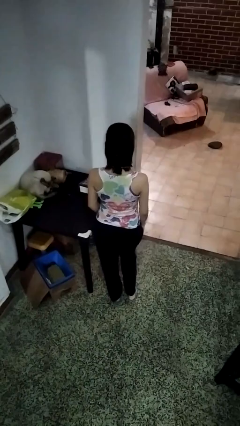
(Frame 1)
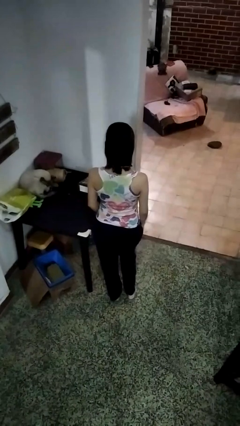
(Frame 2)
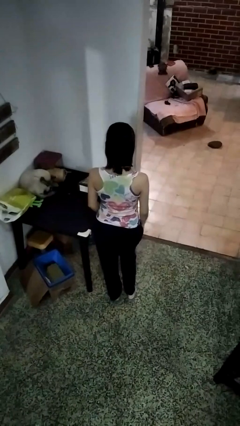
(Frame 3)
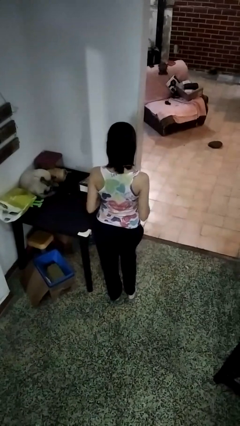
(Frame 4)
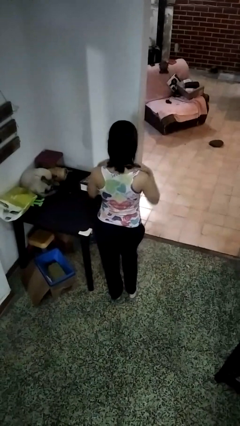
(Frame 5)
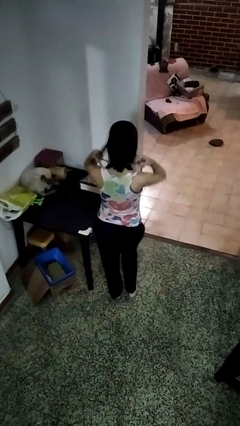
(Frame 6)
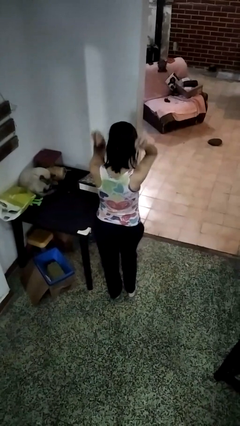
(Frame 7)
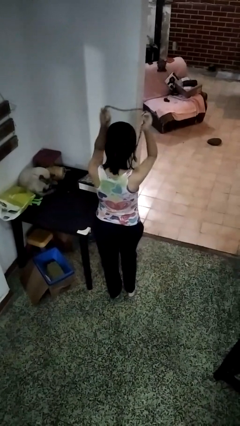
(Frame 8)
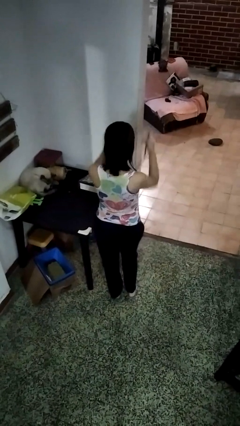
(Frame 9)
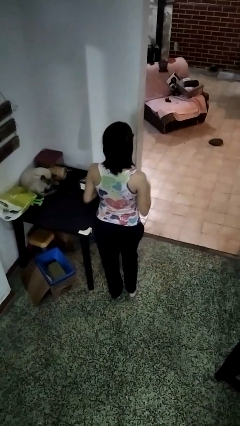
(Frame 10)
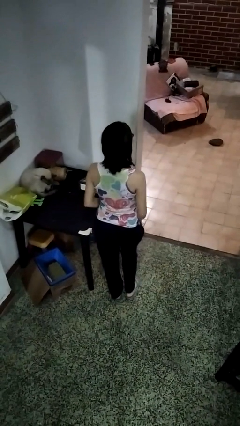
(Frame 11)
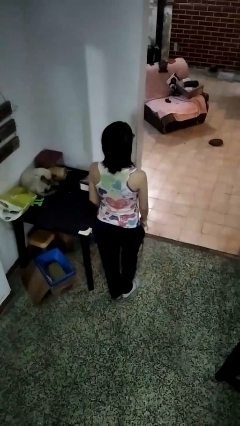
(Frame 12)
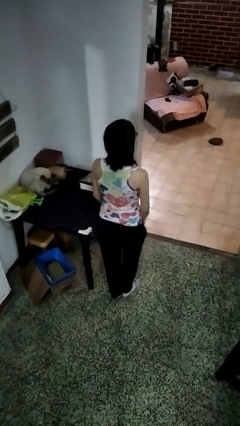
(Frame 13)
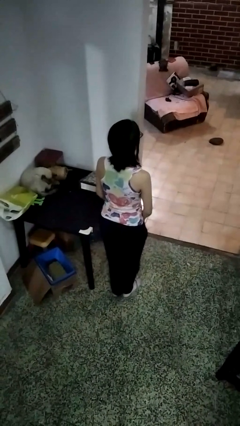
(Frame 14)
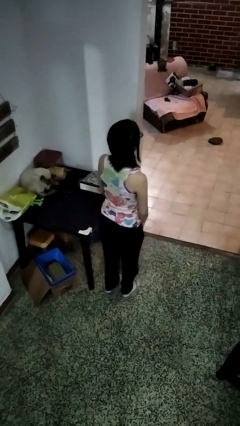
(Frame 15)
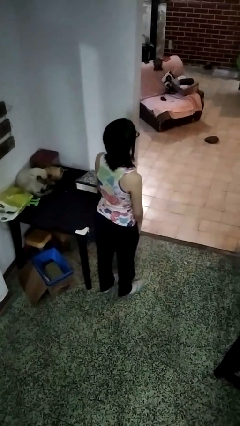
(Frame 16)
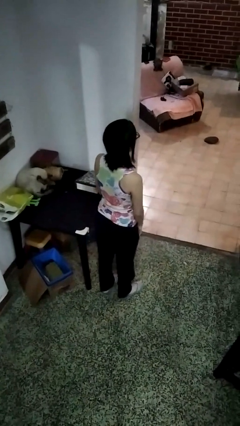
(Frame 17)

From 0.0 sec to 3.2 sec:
person takes off necklace

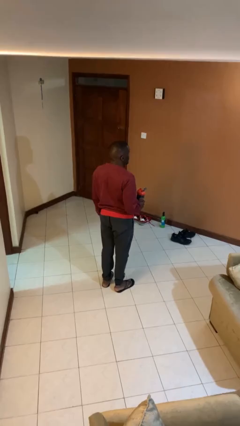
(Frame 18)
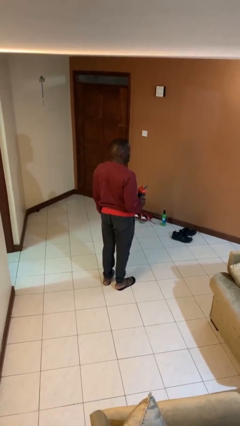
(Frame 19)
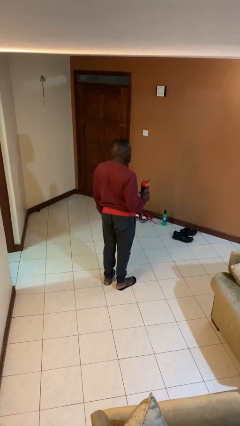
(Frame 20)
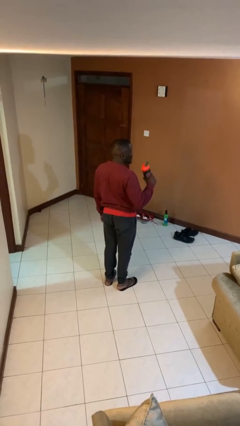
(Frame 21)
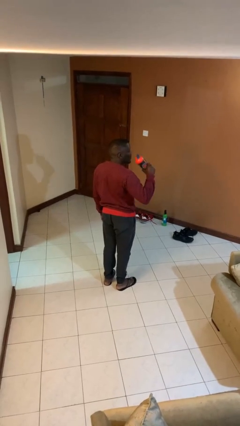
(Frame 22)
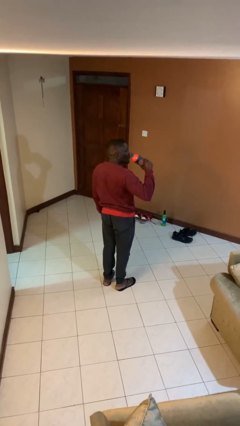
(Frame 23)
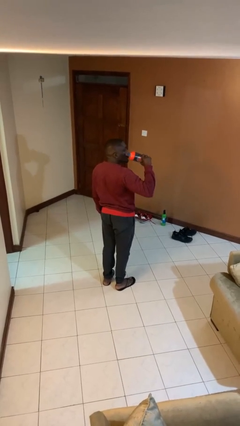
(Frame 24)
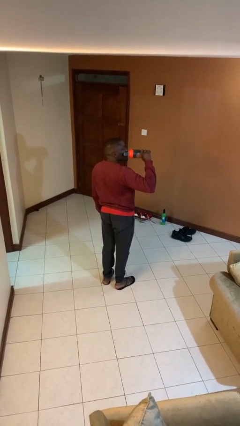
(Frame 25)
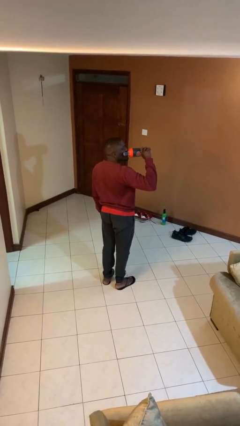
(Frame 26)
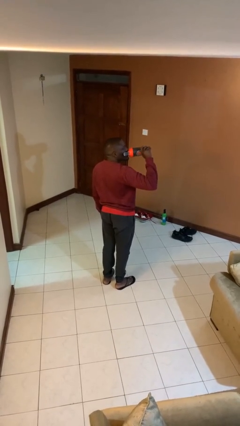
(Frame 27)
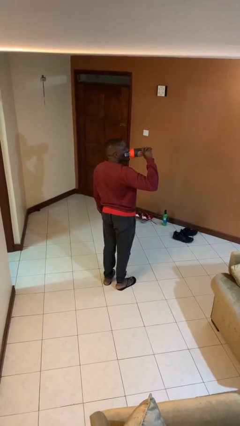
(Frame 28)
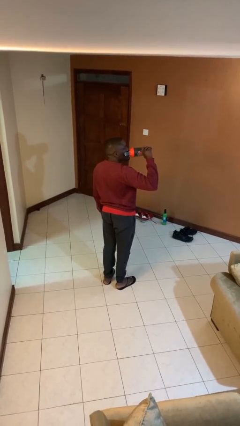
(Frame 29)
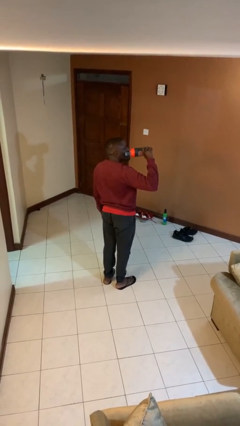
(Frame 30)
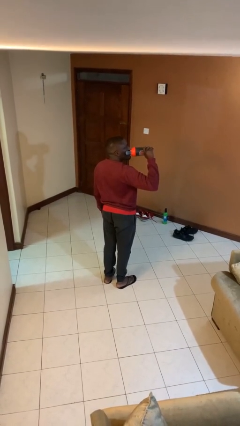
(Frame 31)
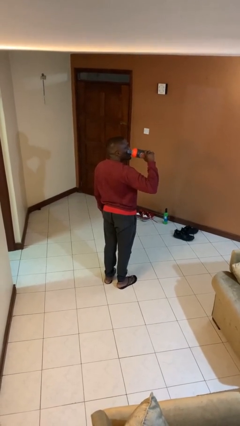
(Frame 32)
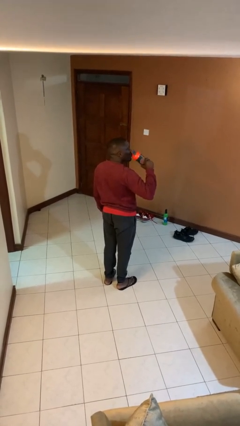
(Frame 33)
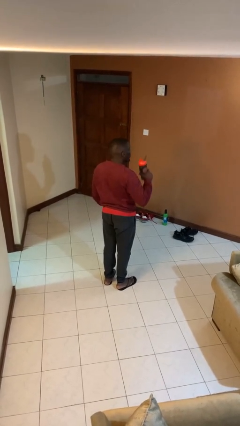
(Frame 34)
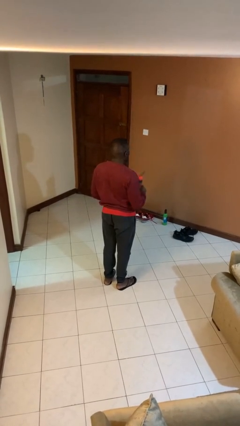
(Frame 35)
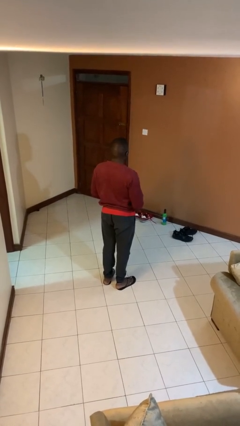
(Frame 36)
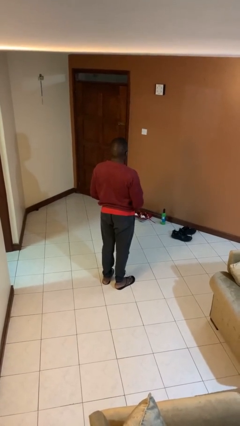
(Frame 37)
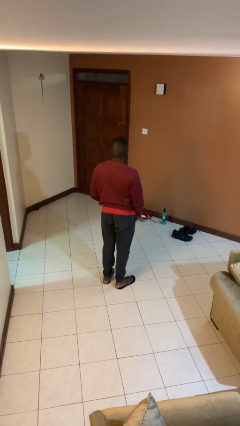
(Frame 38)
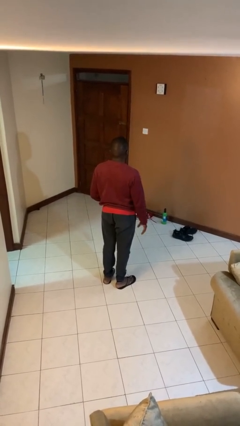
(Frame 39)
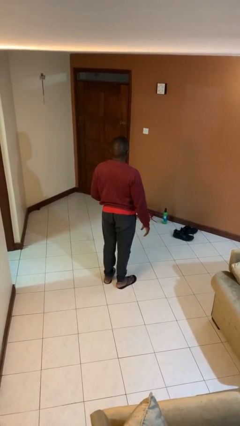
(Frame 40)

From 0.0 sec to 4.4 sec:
person drinks from bottle

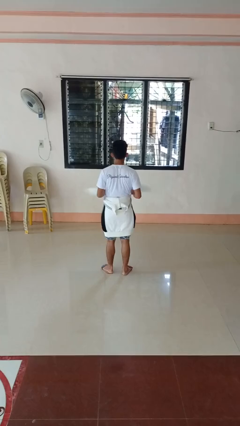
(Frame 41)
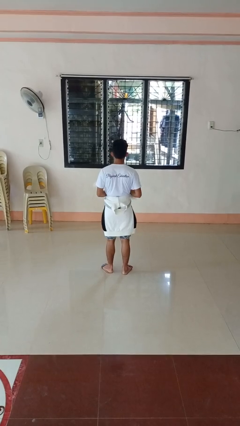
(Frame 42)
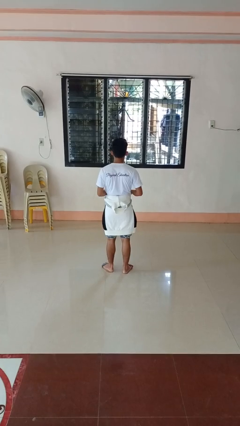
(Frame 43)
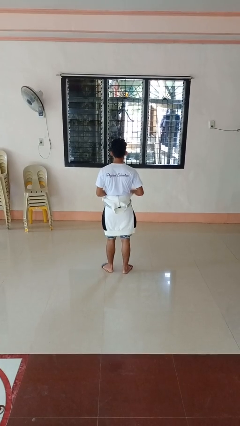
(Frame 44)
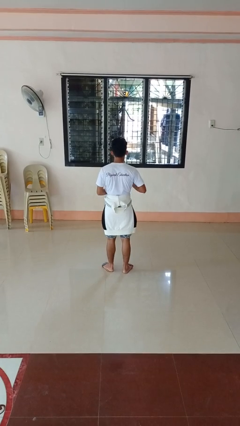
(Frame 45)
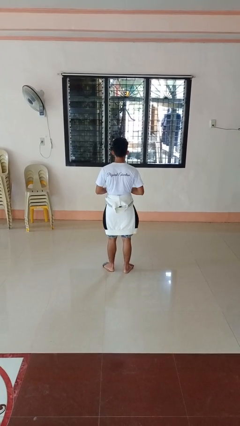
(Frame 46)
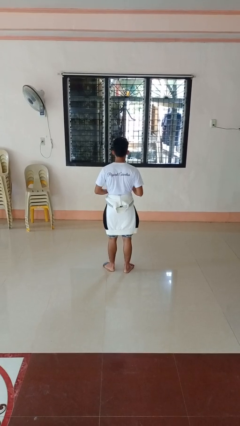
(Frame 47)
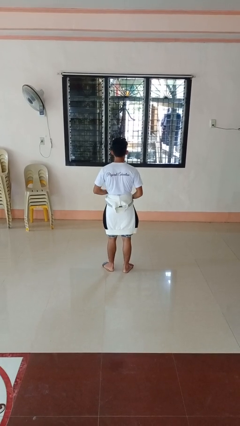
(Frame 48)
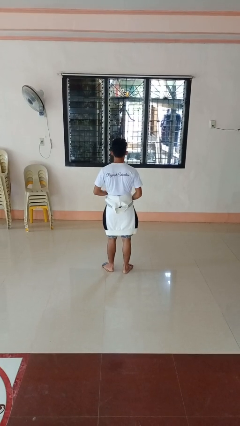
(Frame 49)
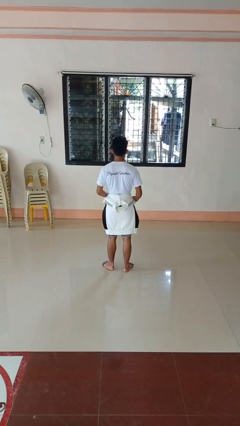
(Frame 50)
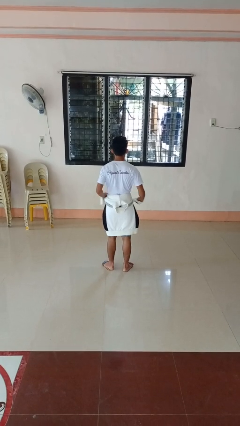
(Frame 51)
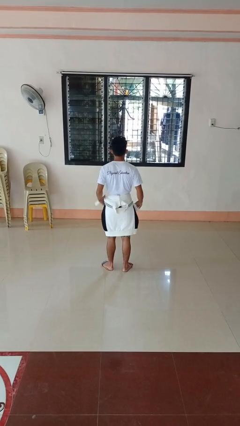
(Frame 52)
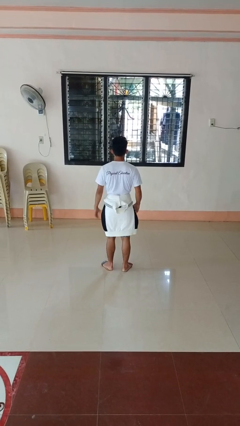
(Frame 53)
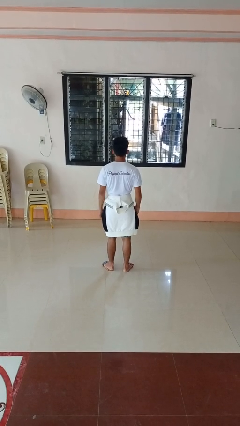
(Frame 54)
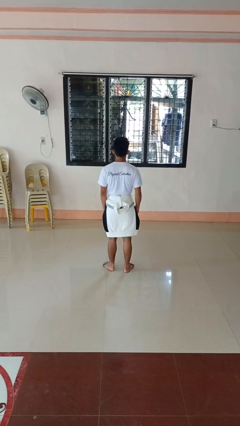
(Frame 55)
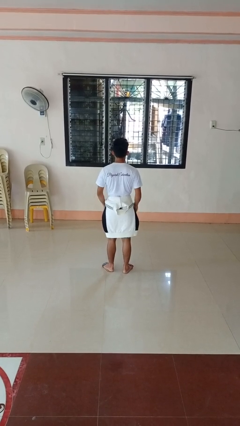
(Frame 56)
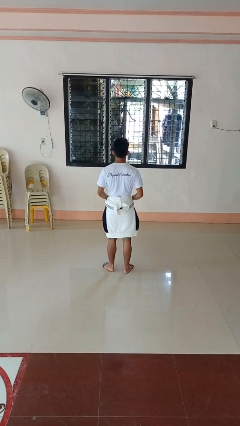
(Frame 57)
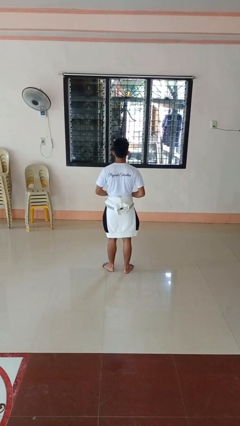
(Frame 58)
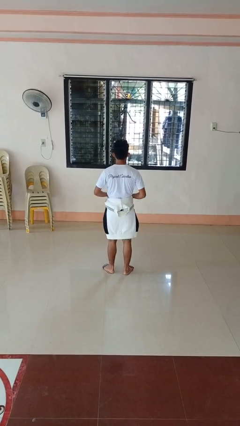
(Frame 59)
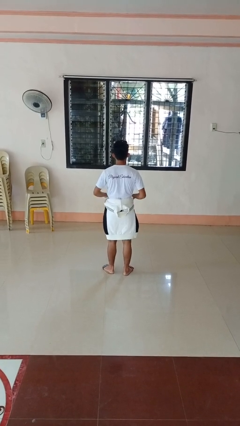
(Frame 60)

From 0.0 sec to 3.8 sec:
person ties jacket around waist

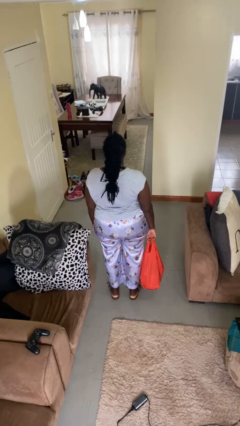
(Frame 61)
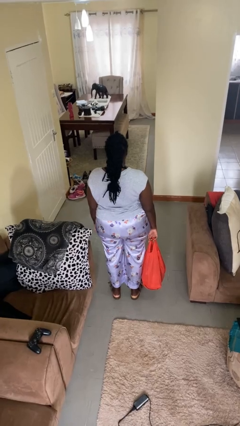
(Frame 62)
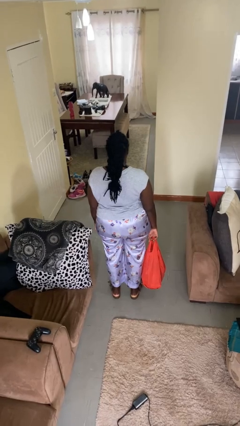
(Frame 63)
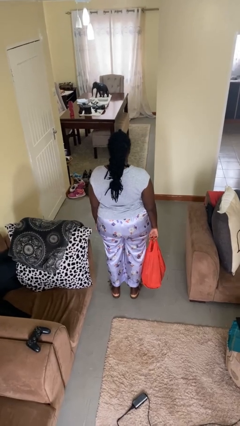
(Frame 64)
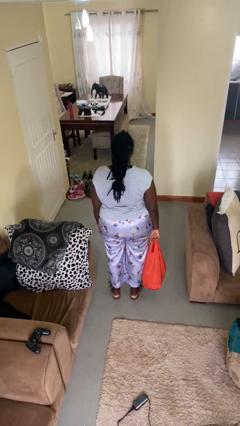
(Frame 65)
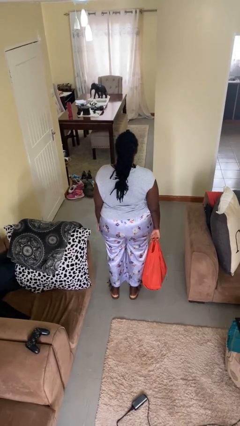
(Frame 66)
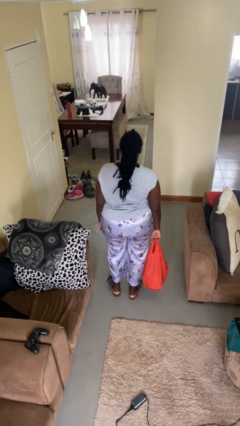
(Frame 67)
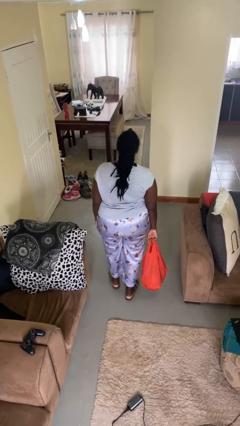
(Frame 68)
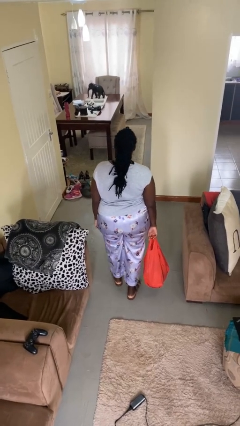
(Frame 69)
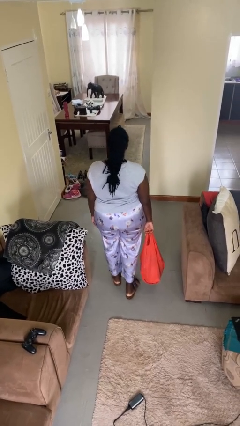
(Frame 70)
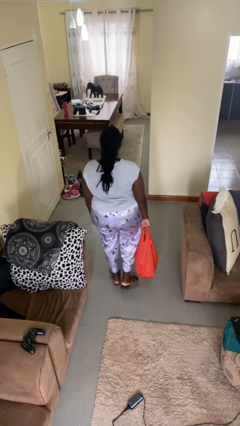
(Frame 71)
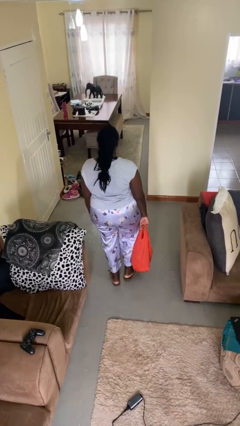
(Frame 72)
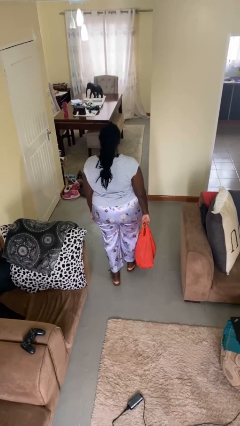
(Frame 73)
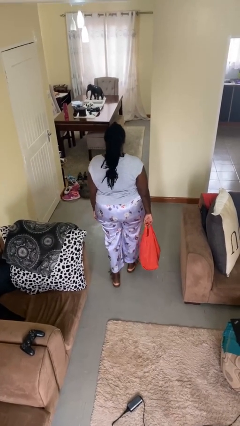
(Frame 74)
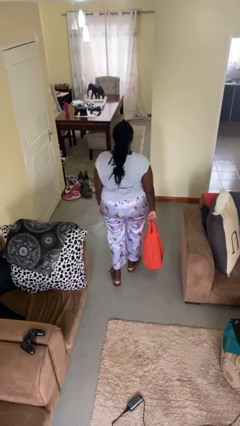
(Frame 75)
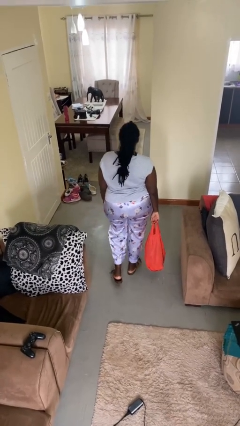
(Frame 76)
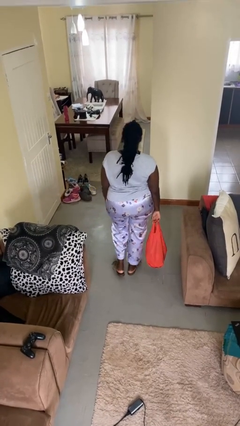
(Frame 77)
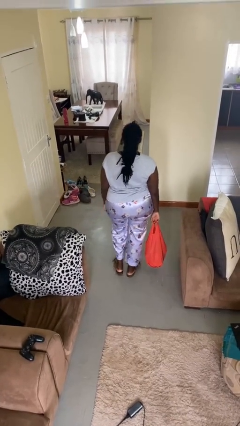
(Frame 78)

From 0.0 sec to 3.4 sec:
person carries groceries

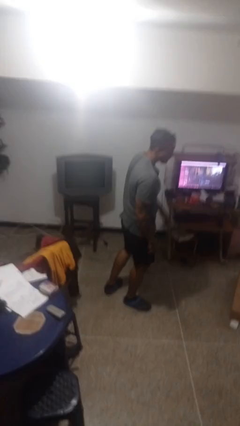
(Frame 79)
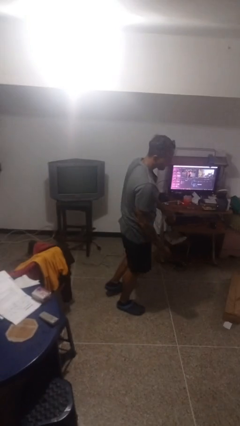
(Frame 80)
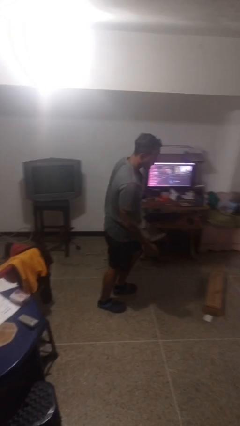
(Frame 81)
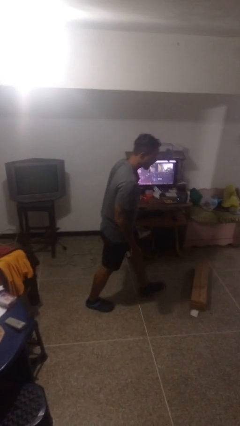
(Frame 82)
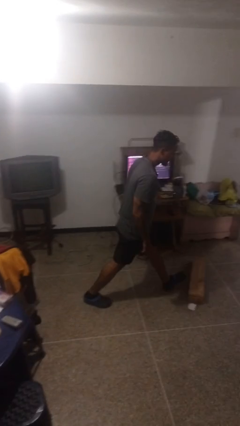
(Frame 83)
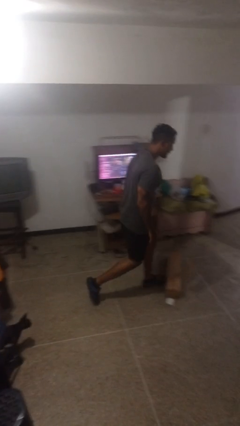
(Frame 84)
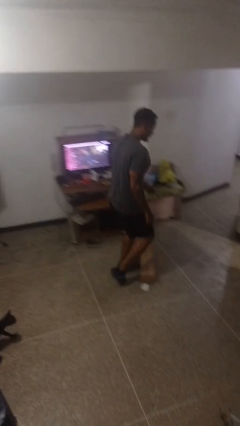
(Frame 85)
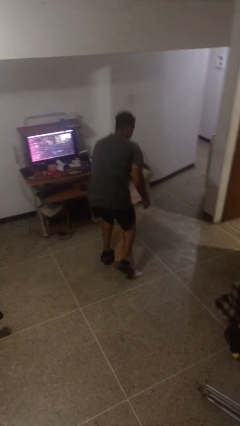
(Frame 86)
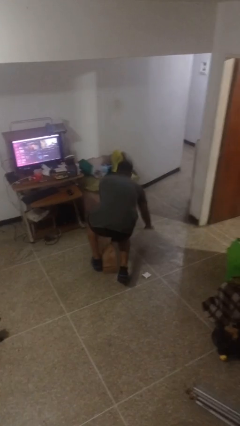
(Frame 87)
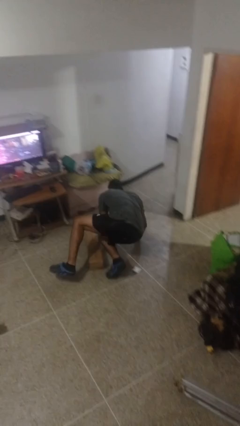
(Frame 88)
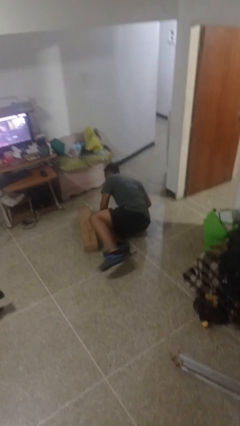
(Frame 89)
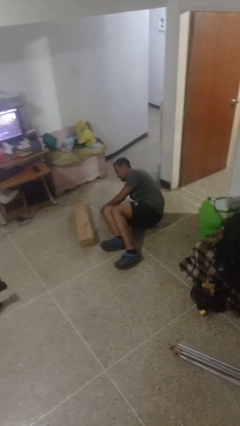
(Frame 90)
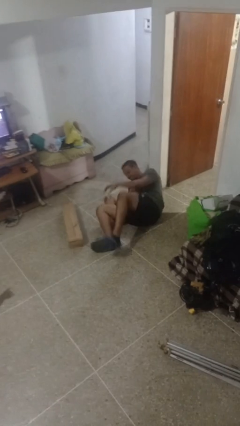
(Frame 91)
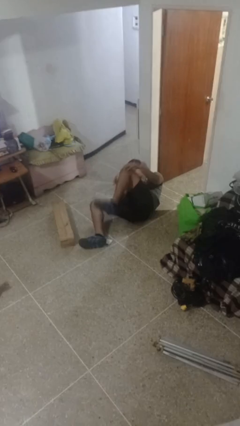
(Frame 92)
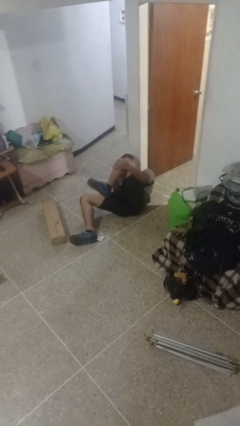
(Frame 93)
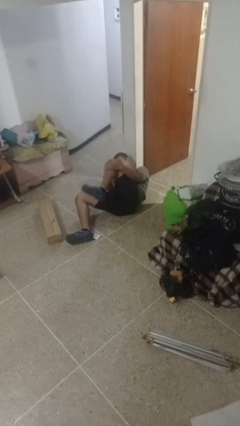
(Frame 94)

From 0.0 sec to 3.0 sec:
person trips on object on floor
